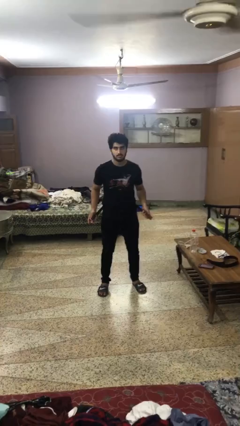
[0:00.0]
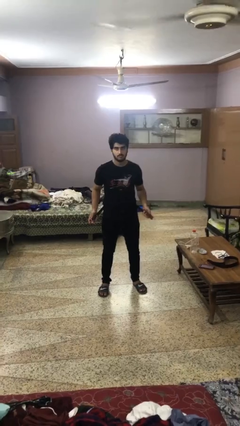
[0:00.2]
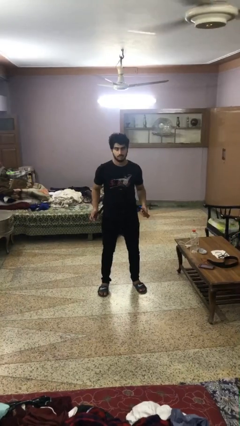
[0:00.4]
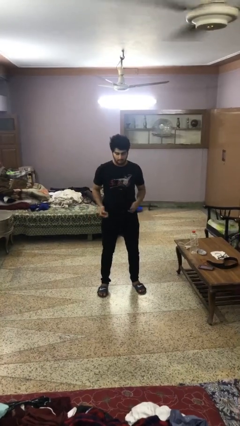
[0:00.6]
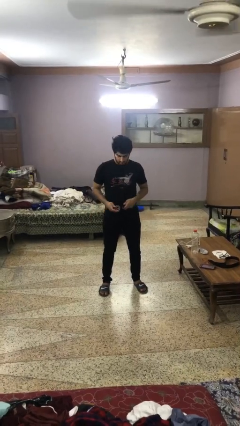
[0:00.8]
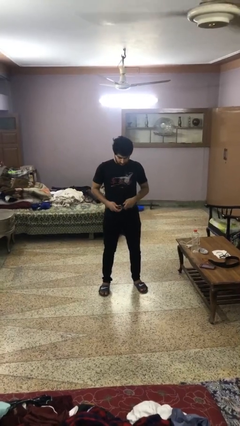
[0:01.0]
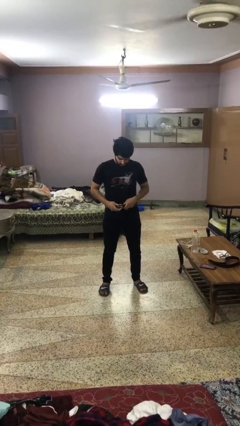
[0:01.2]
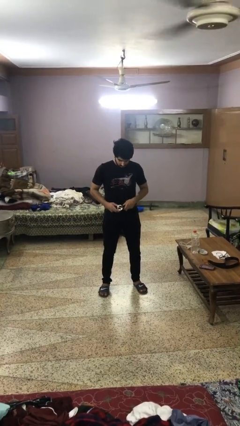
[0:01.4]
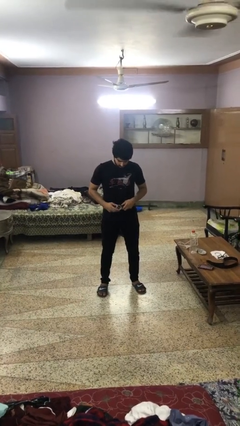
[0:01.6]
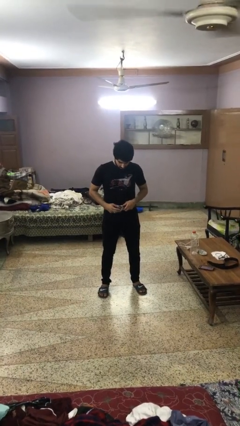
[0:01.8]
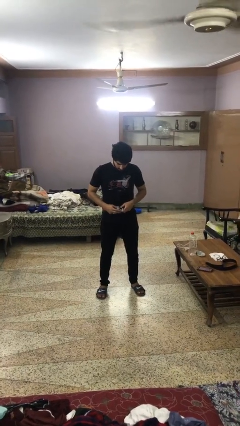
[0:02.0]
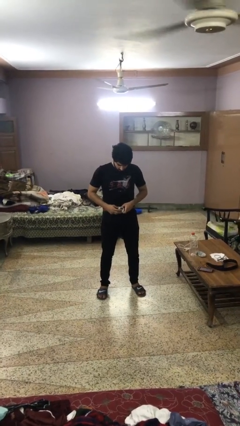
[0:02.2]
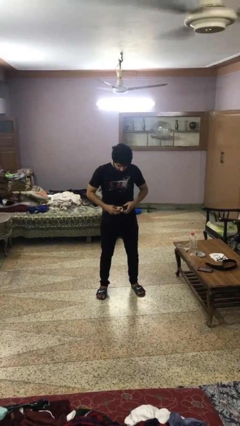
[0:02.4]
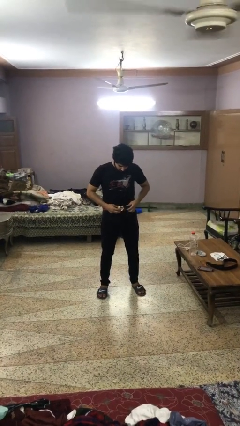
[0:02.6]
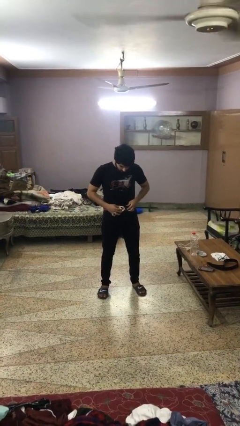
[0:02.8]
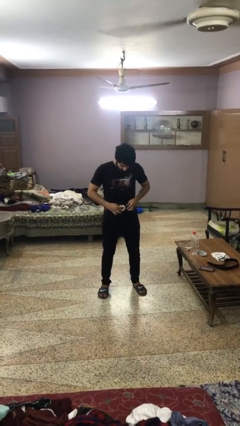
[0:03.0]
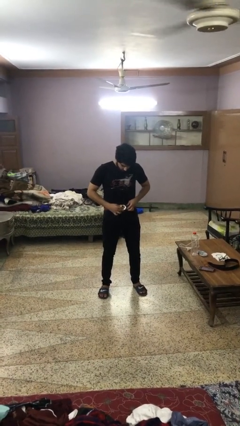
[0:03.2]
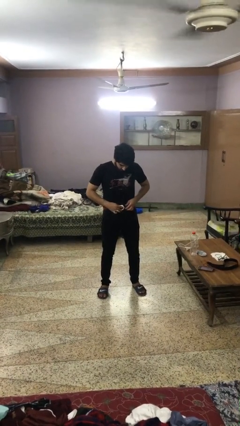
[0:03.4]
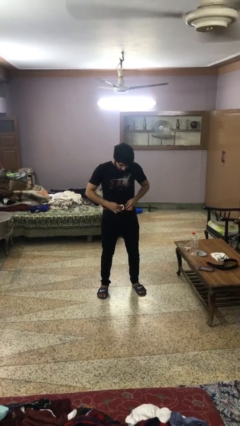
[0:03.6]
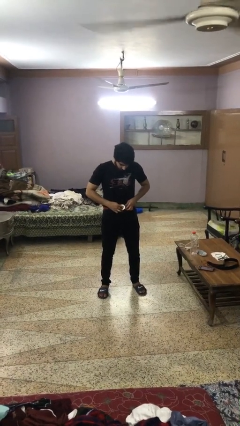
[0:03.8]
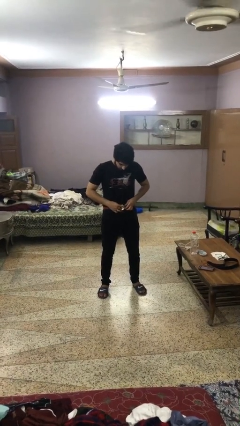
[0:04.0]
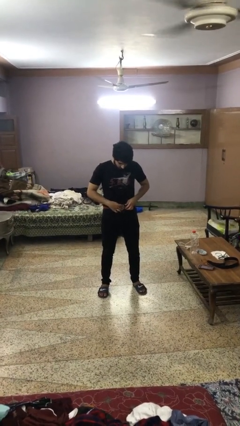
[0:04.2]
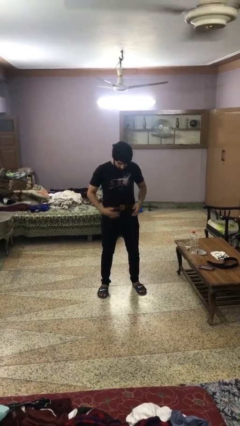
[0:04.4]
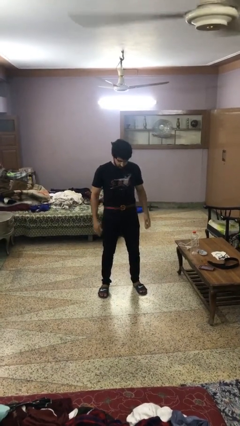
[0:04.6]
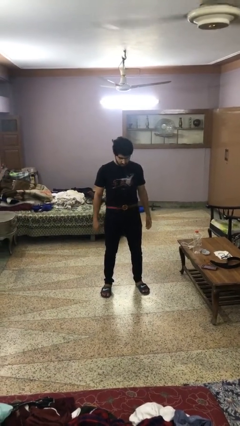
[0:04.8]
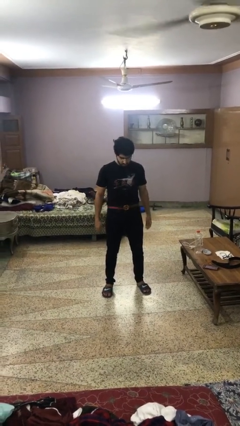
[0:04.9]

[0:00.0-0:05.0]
person puts on belt

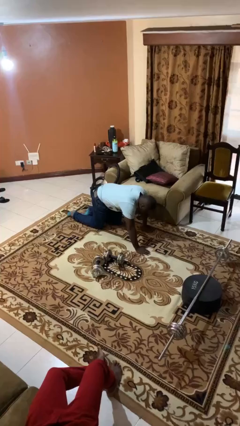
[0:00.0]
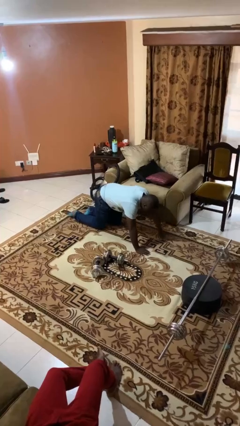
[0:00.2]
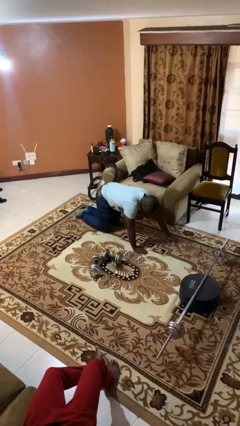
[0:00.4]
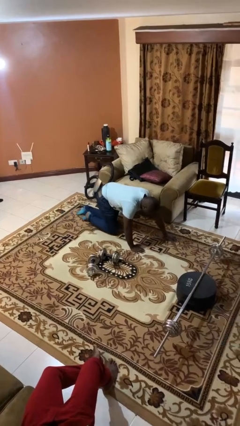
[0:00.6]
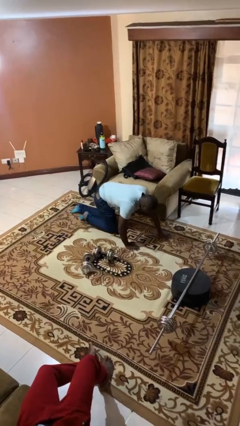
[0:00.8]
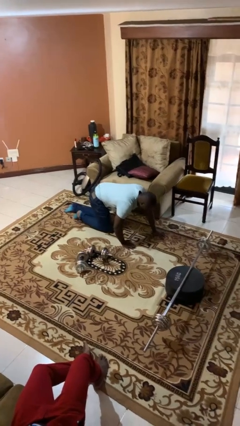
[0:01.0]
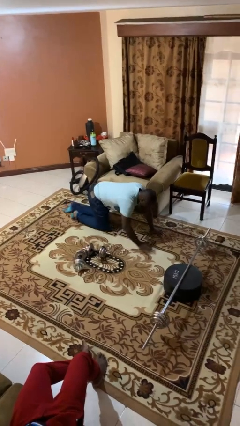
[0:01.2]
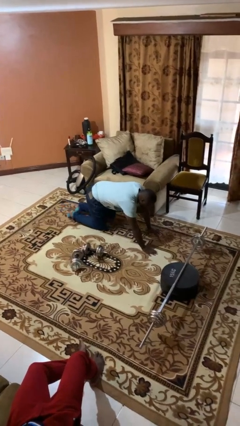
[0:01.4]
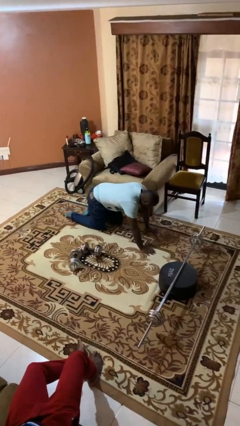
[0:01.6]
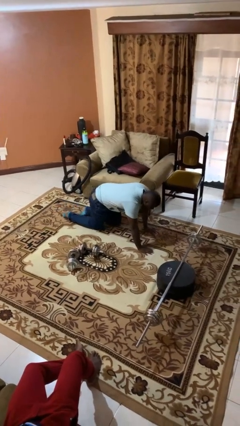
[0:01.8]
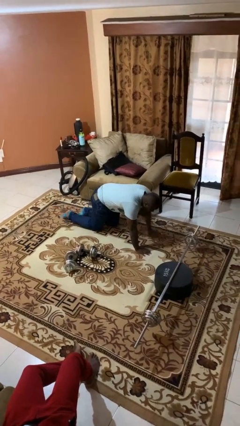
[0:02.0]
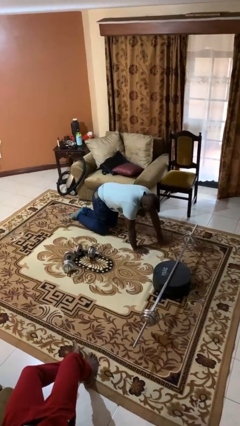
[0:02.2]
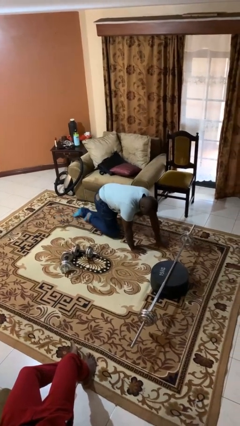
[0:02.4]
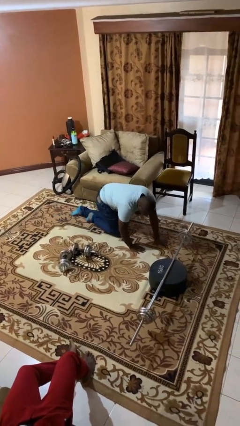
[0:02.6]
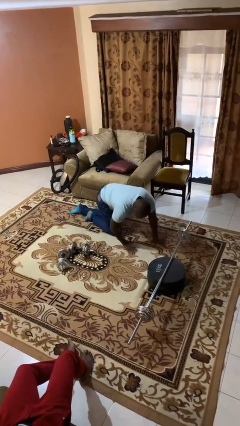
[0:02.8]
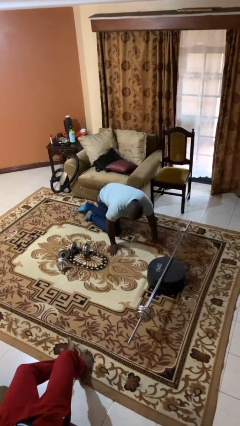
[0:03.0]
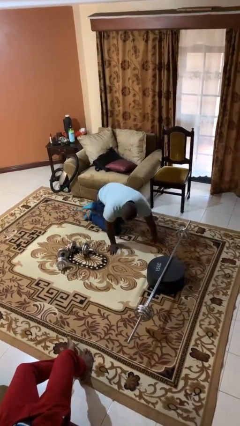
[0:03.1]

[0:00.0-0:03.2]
person crawls

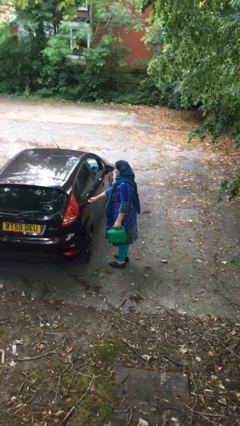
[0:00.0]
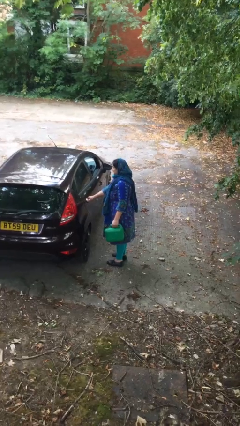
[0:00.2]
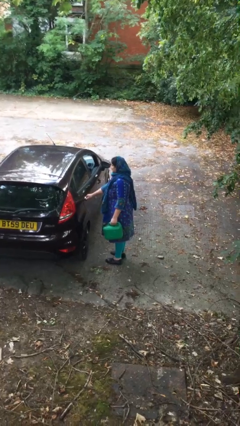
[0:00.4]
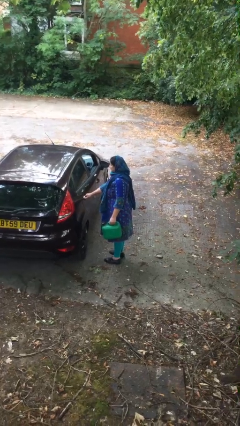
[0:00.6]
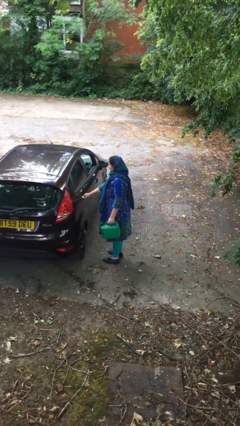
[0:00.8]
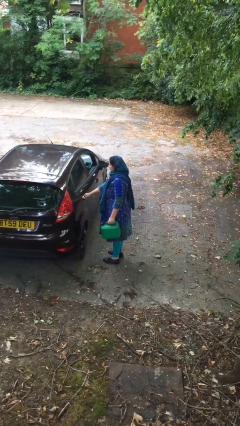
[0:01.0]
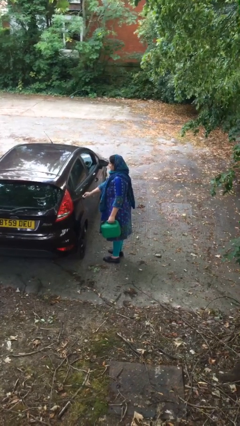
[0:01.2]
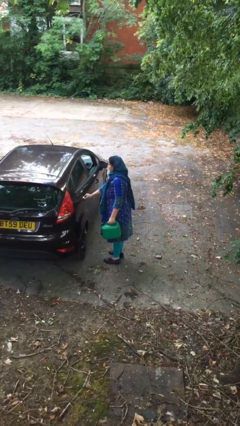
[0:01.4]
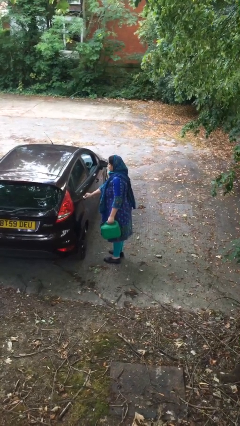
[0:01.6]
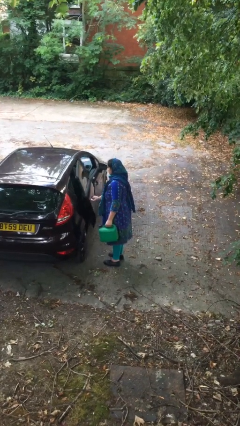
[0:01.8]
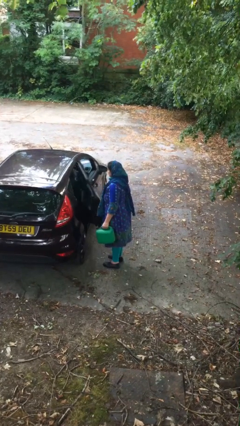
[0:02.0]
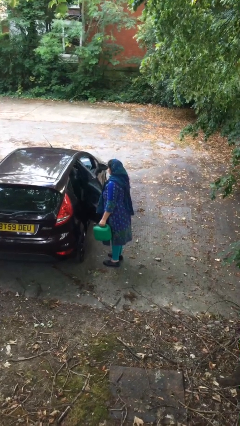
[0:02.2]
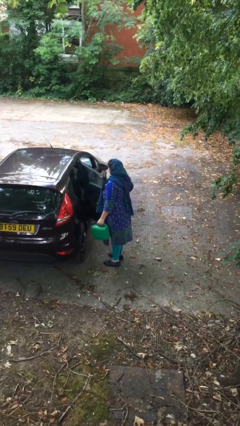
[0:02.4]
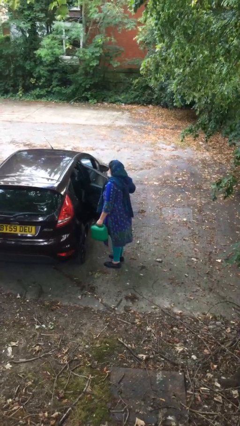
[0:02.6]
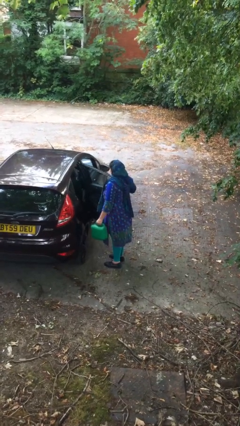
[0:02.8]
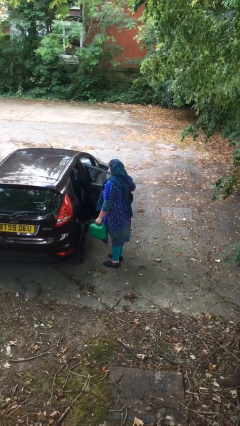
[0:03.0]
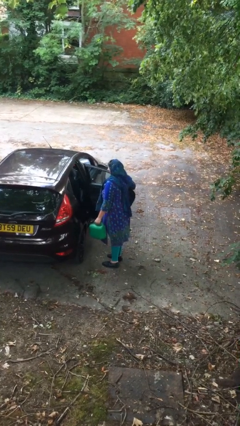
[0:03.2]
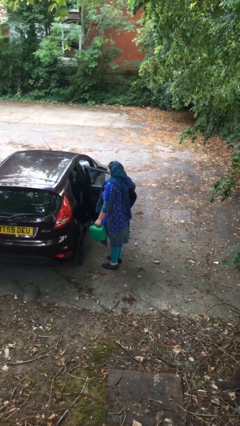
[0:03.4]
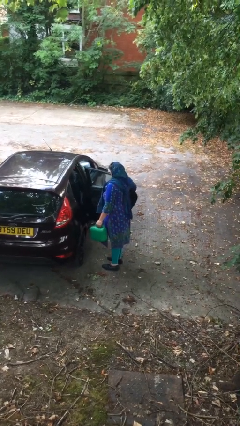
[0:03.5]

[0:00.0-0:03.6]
person opens car door

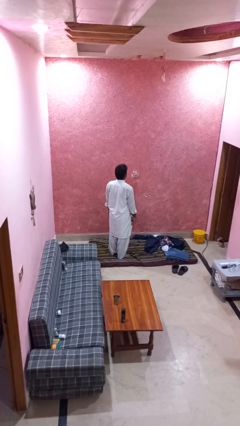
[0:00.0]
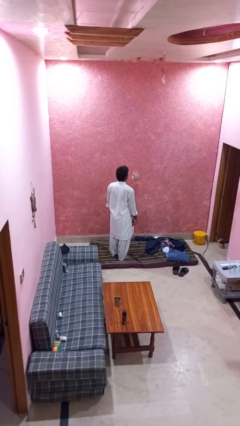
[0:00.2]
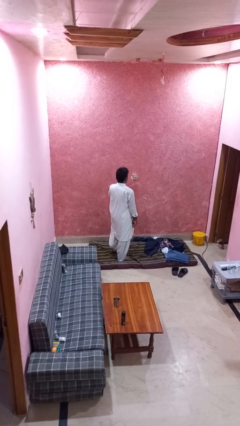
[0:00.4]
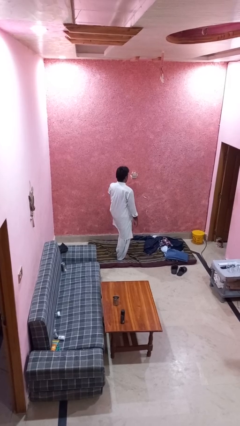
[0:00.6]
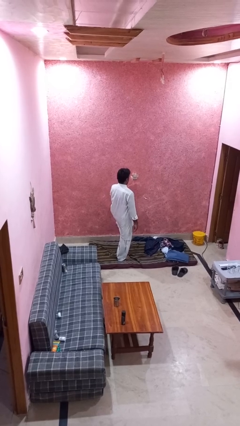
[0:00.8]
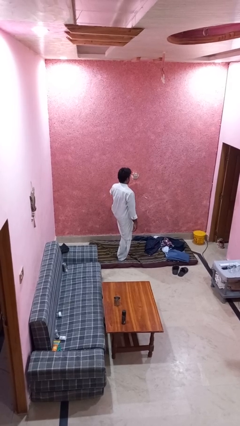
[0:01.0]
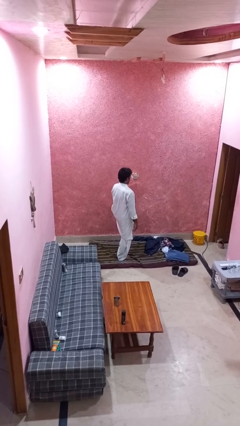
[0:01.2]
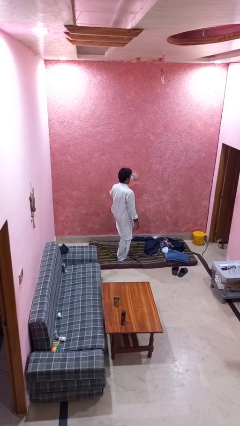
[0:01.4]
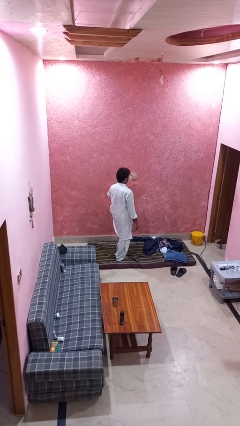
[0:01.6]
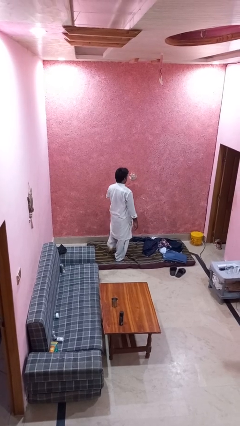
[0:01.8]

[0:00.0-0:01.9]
person slaps hands on thighs

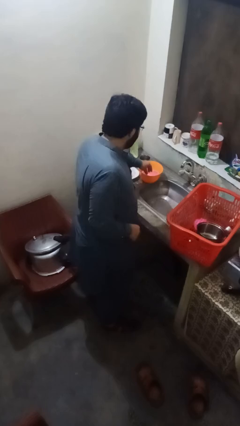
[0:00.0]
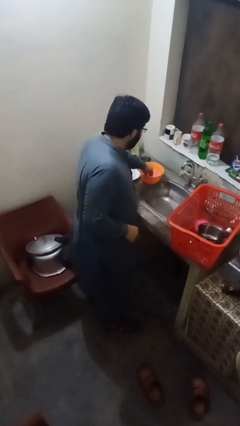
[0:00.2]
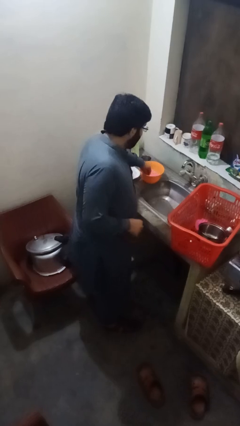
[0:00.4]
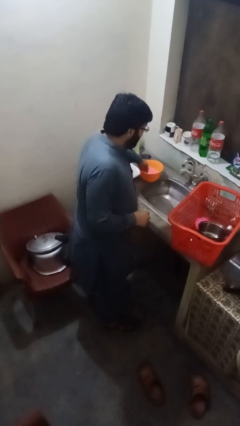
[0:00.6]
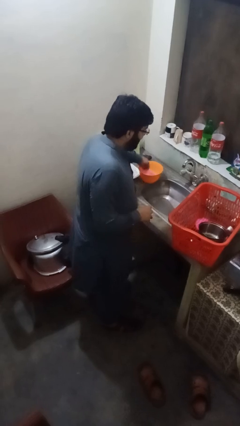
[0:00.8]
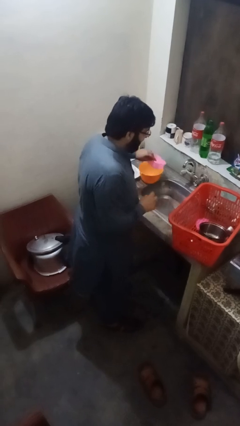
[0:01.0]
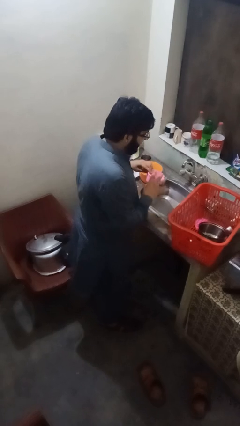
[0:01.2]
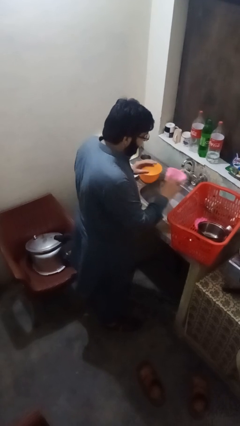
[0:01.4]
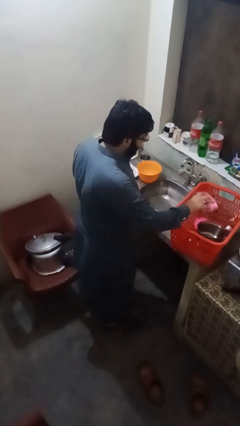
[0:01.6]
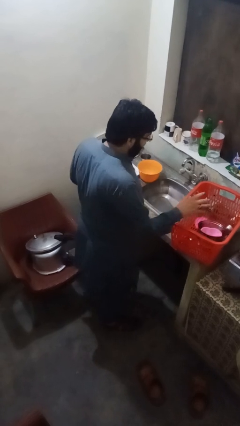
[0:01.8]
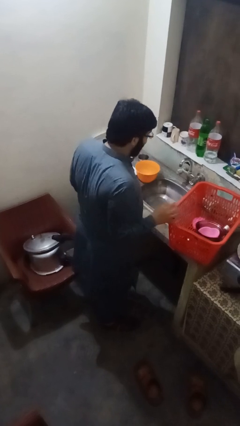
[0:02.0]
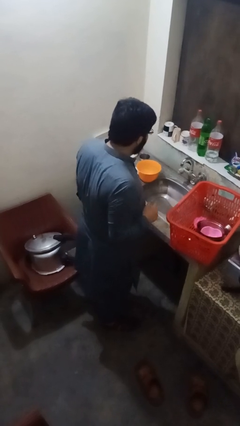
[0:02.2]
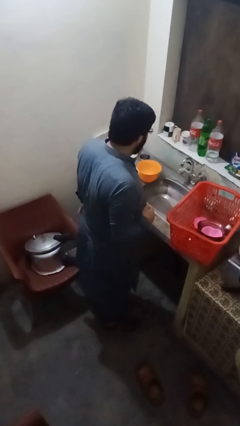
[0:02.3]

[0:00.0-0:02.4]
person loads dishwasher

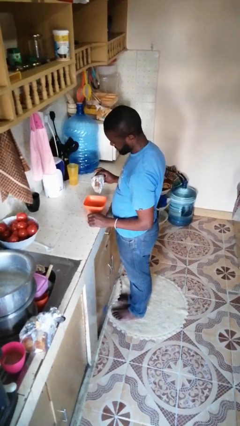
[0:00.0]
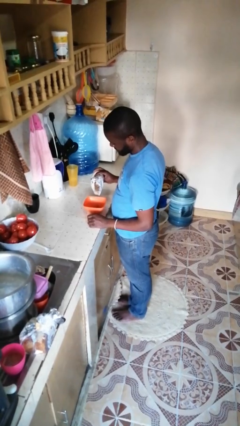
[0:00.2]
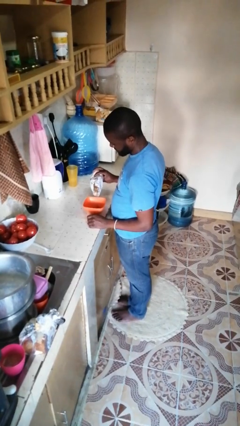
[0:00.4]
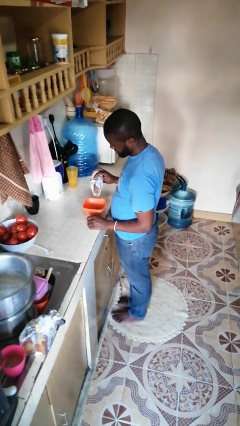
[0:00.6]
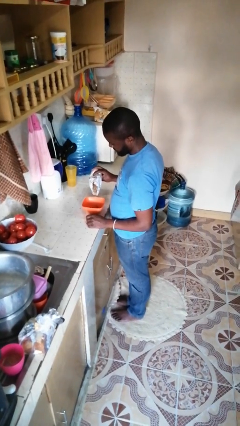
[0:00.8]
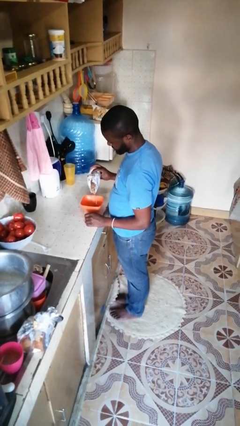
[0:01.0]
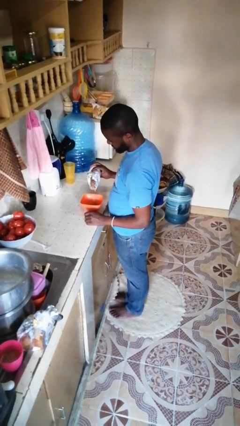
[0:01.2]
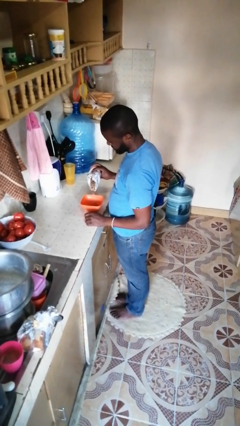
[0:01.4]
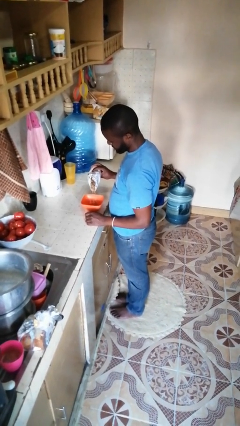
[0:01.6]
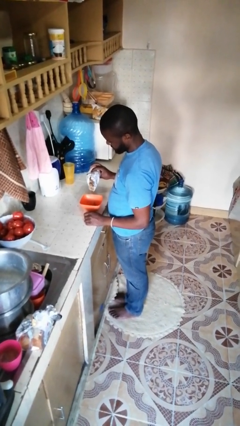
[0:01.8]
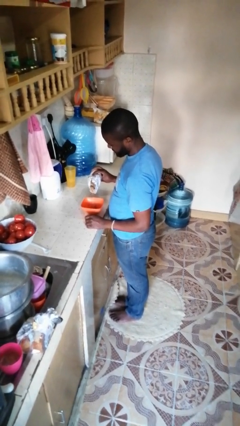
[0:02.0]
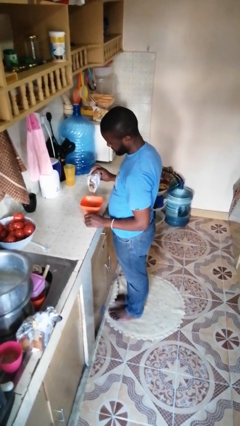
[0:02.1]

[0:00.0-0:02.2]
person pours into bowl
